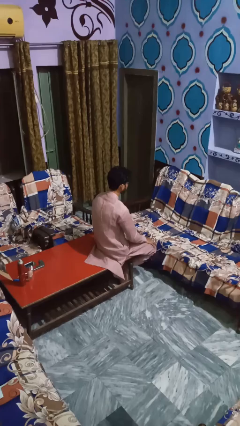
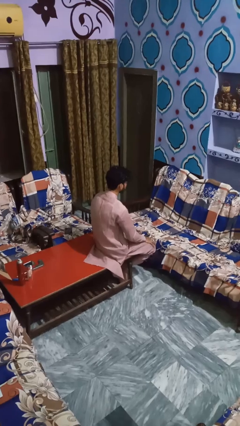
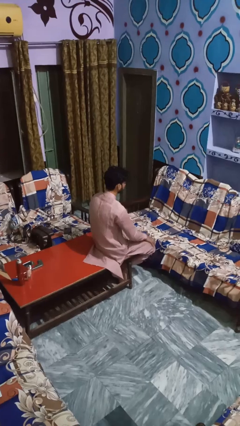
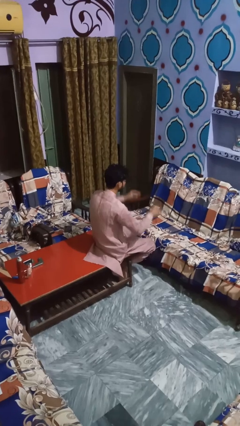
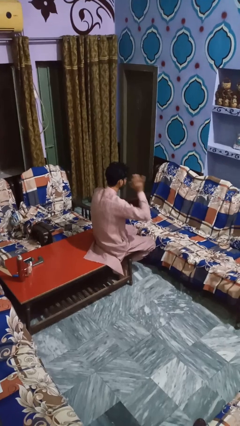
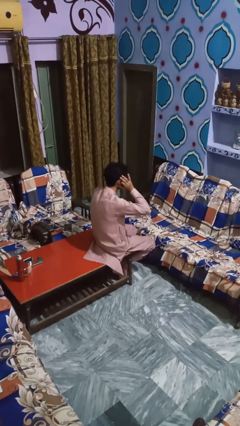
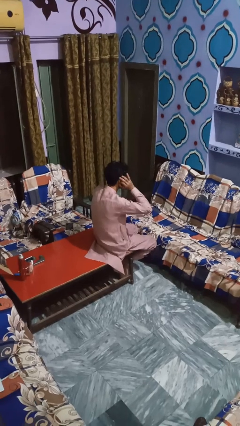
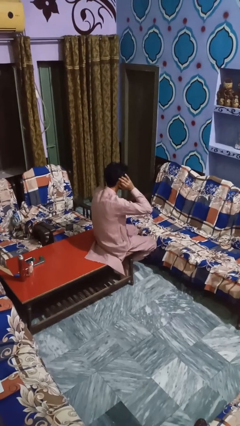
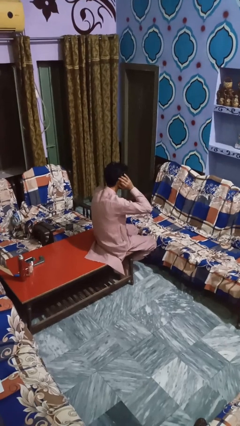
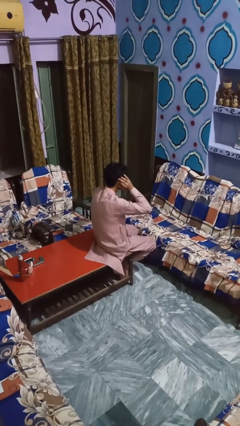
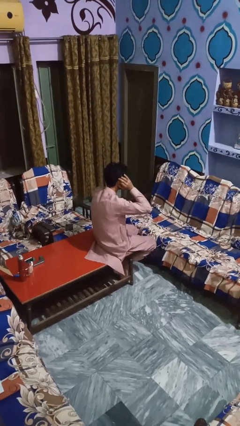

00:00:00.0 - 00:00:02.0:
person puts fingers in ear

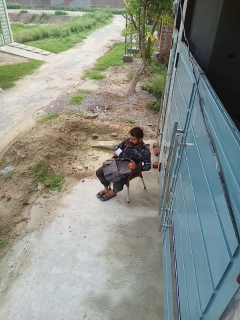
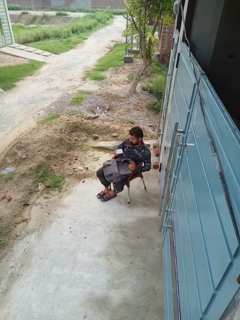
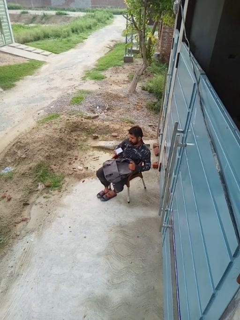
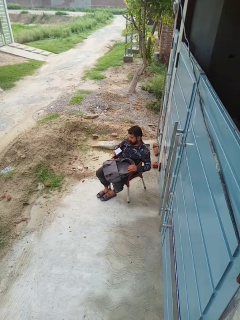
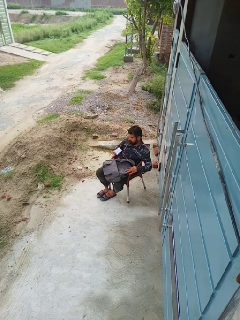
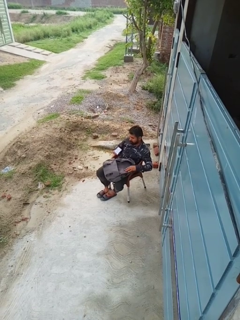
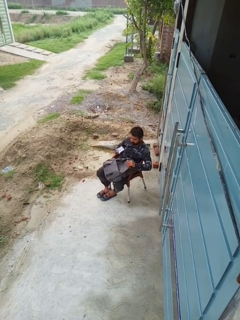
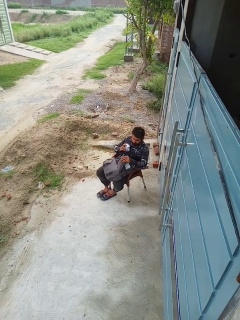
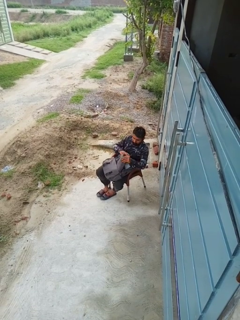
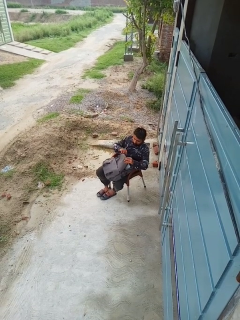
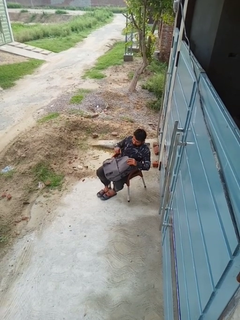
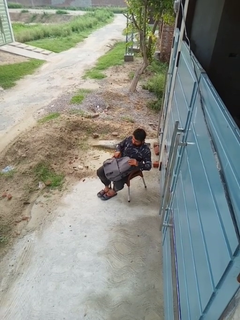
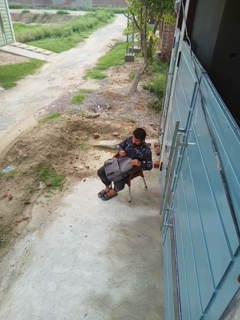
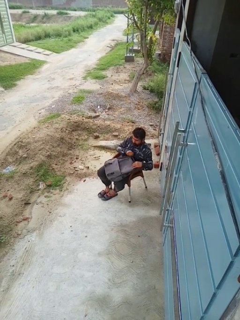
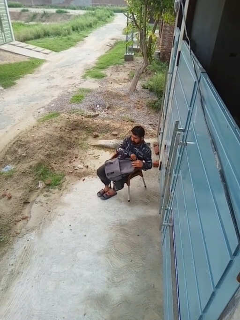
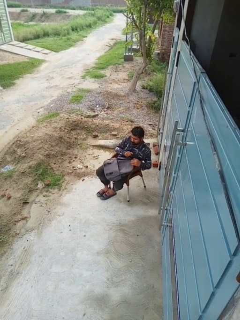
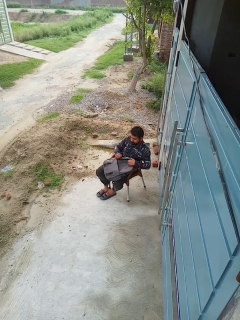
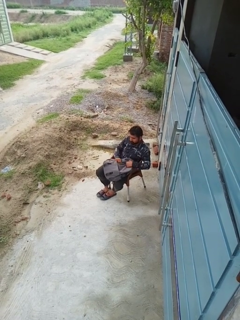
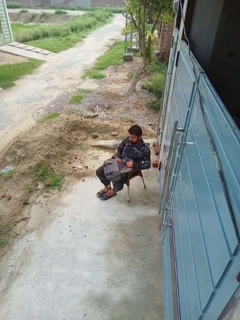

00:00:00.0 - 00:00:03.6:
person puts object into backpack

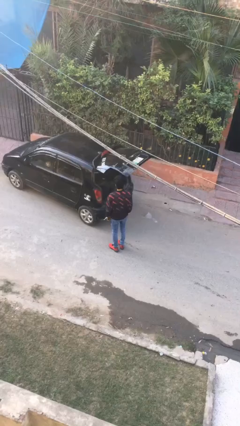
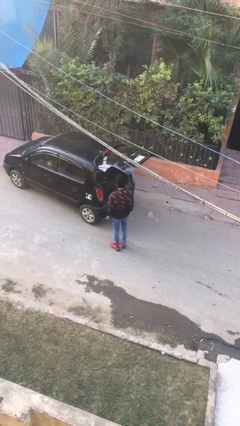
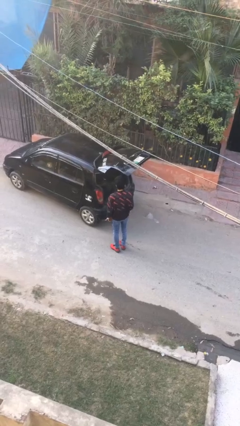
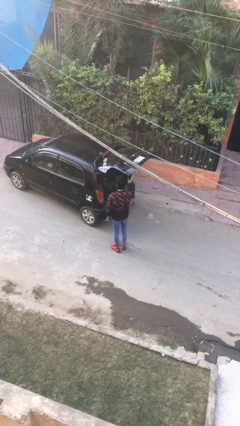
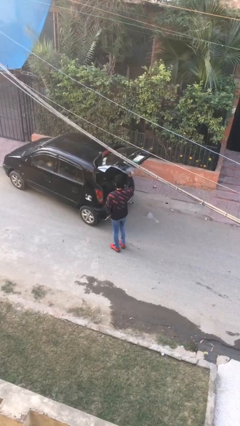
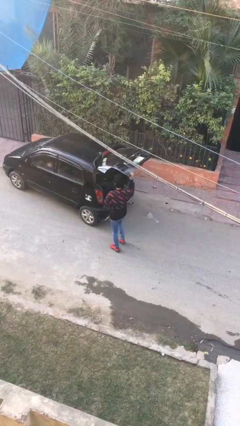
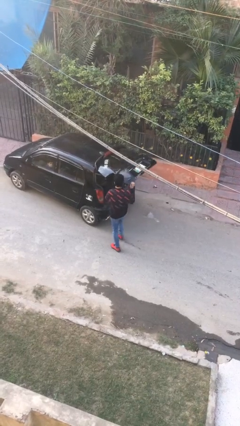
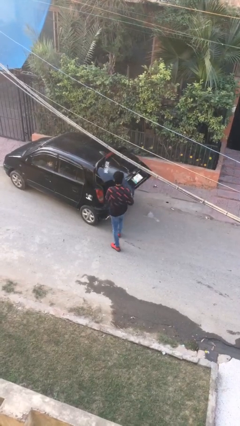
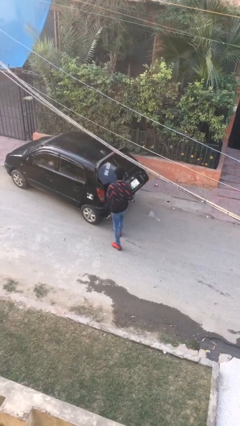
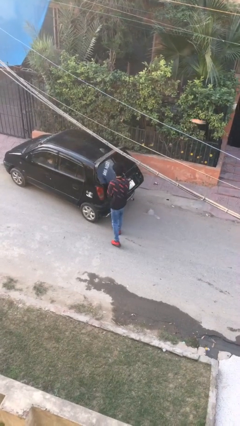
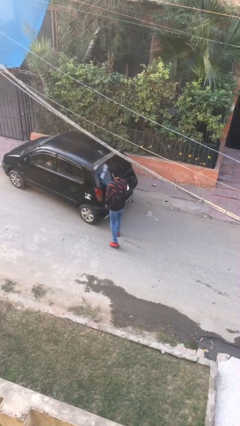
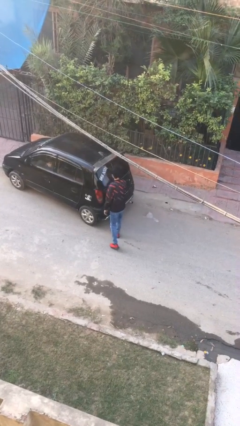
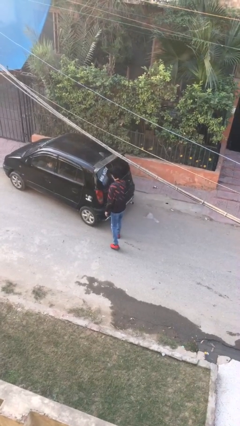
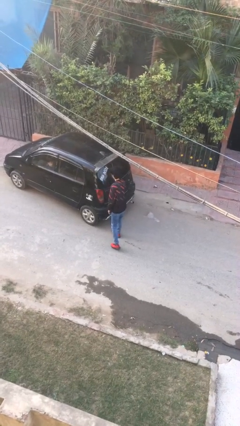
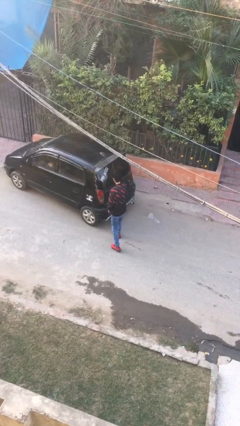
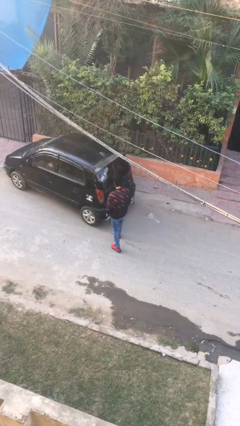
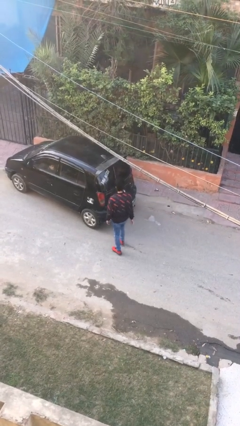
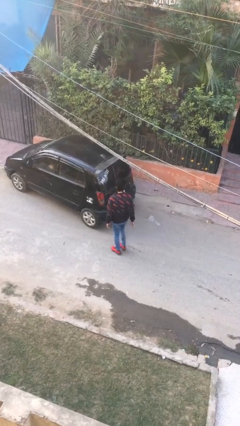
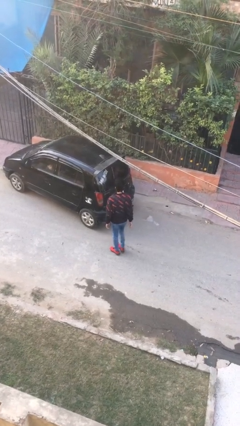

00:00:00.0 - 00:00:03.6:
person closes car trunk

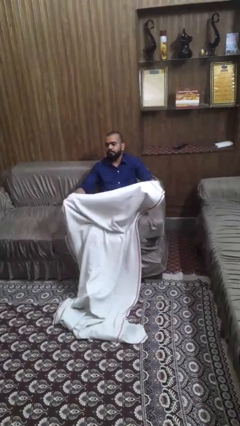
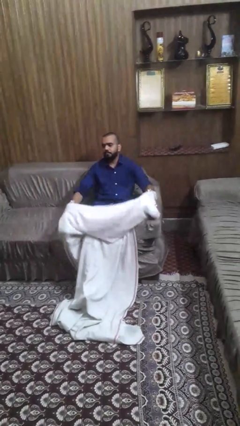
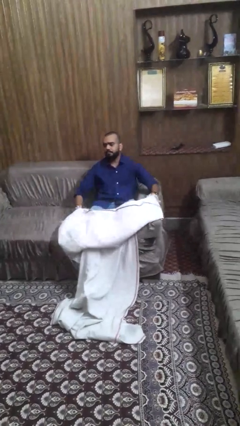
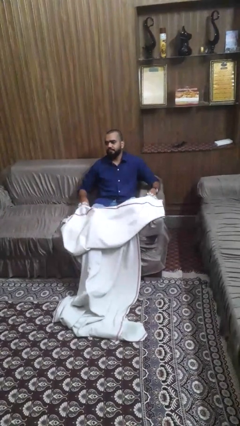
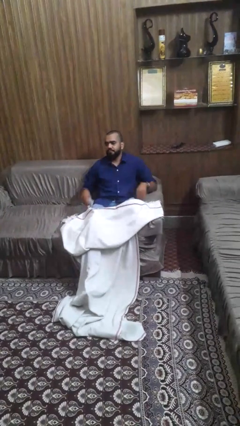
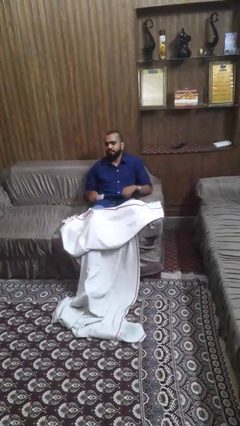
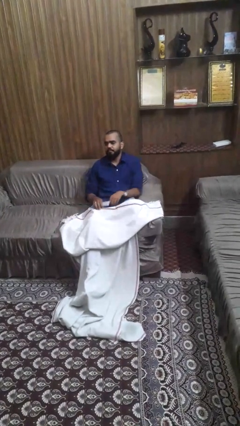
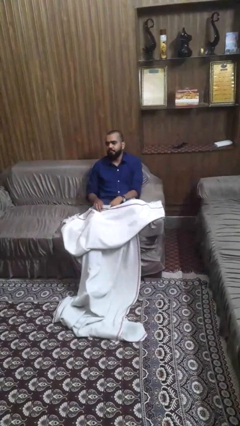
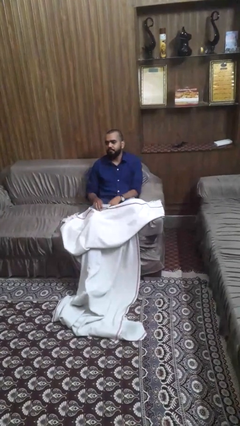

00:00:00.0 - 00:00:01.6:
person uncovers with blanket

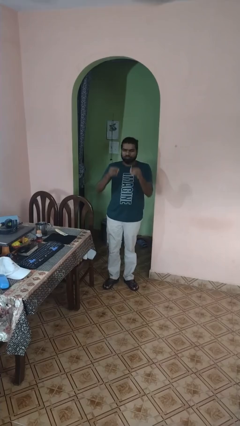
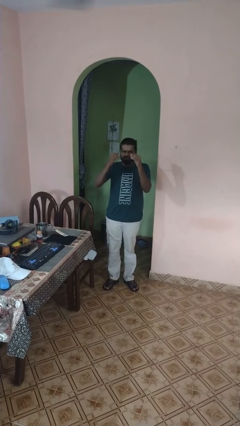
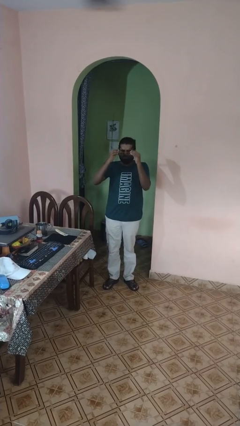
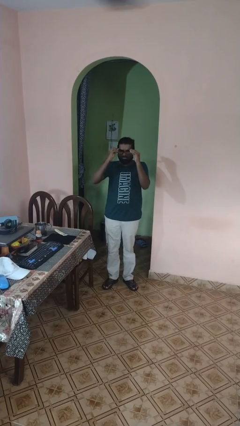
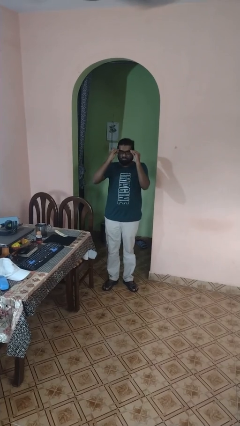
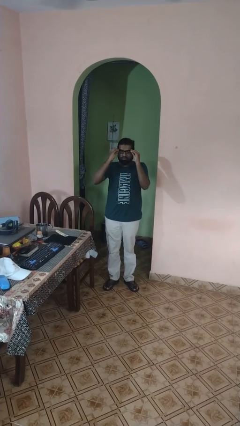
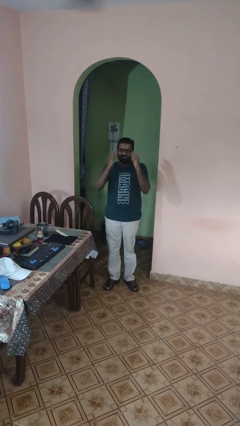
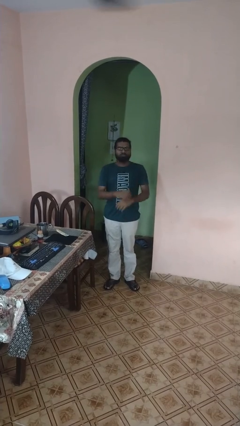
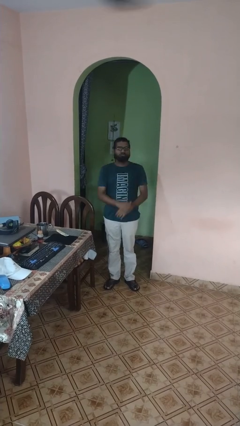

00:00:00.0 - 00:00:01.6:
person puts on glasses

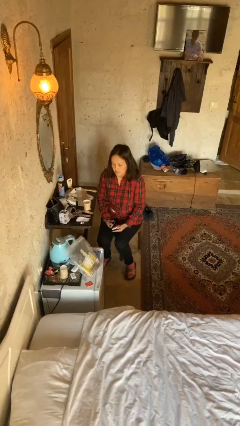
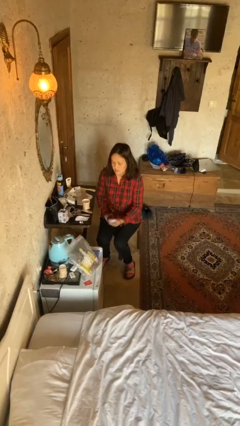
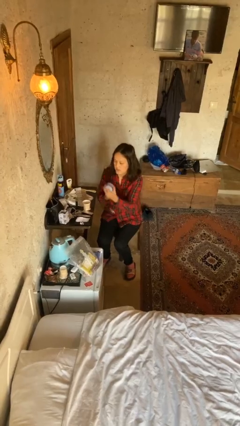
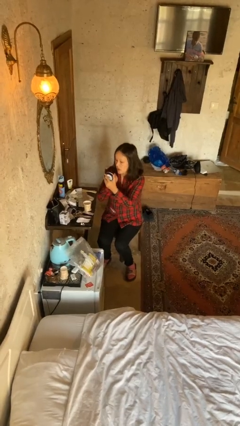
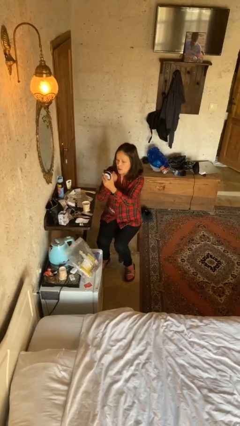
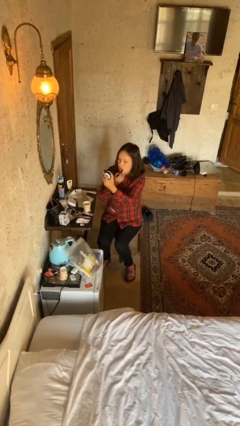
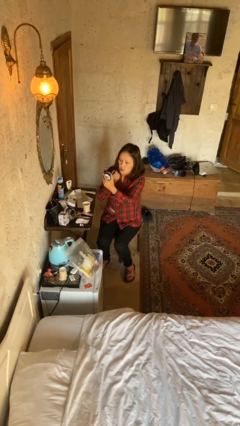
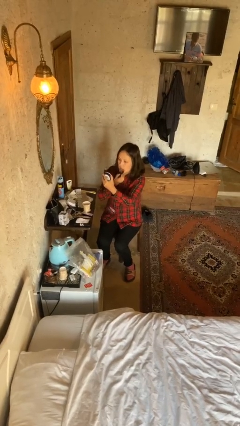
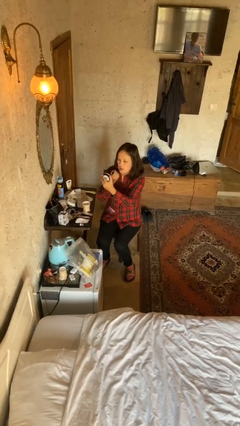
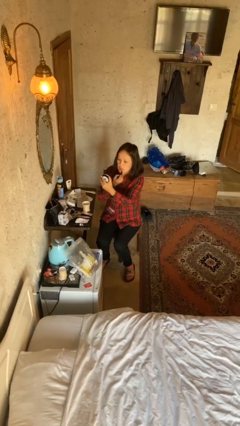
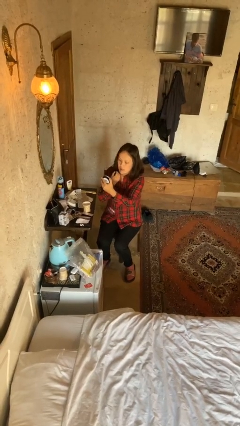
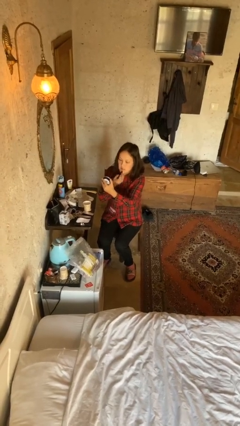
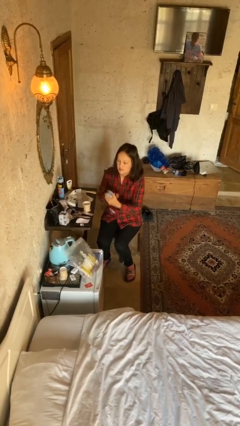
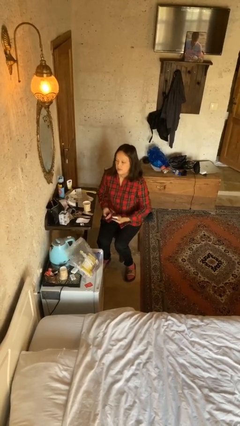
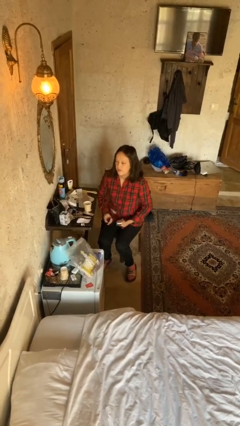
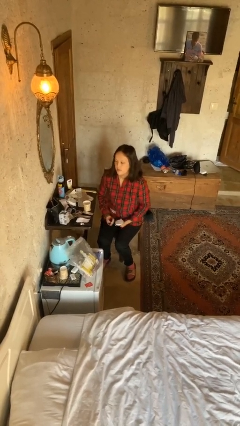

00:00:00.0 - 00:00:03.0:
person applies lip makeup

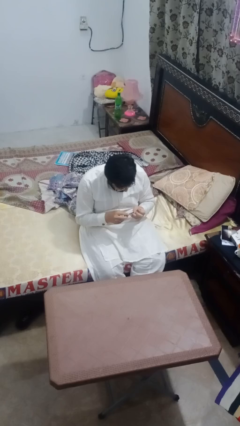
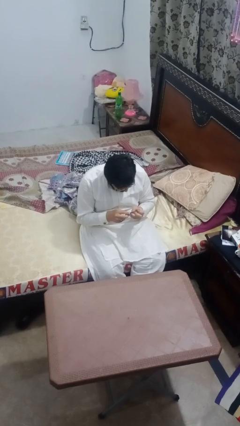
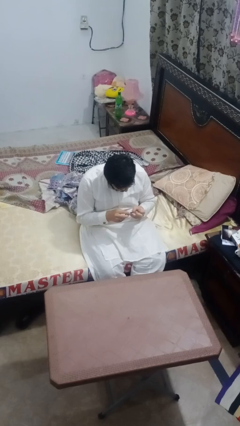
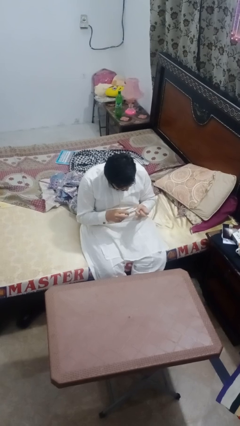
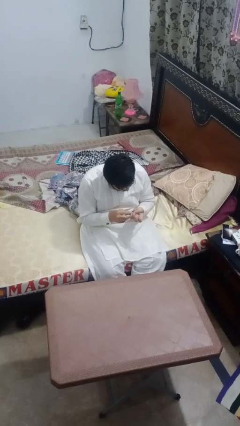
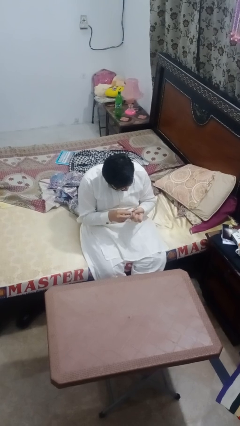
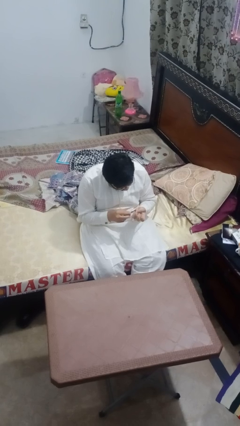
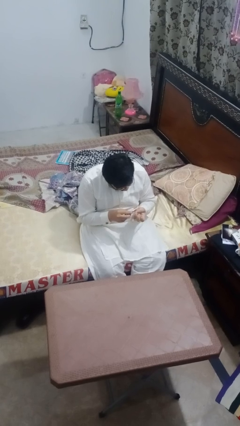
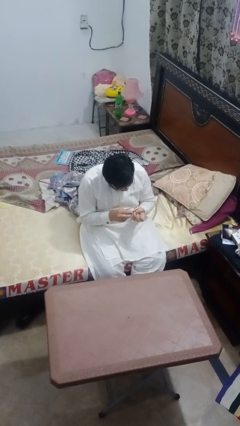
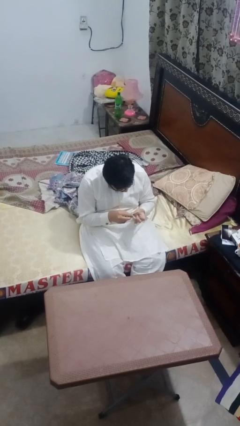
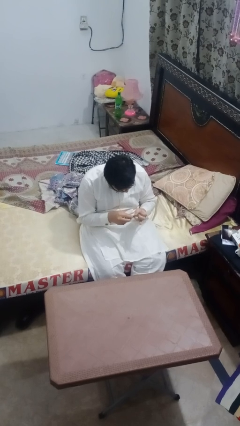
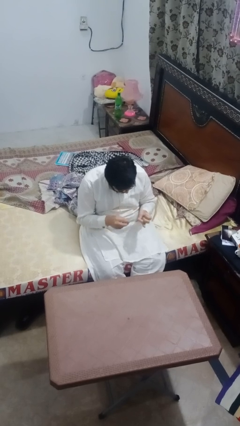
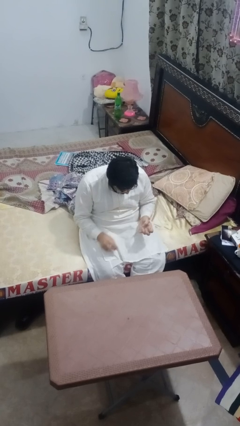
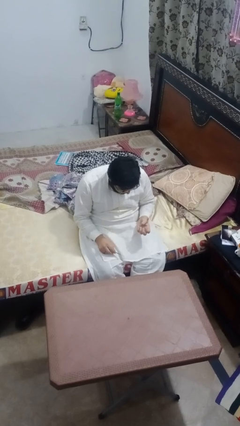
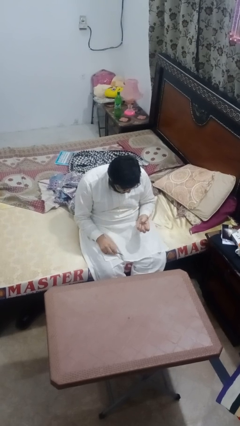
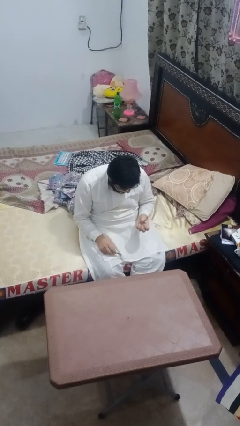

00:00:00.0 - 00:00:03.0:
person files fingernails
